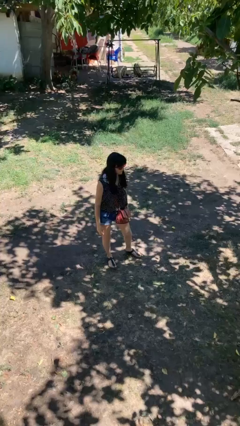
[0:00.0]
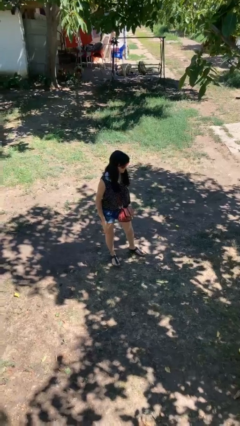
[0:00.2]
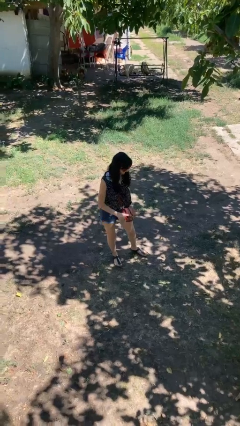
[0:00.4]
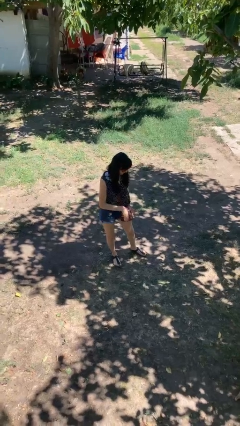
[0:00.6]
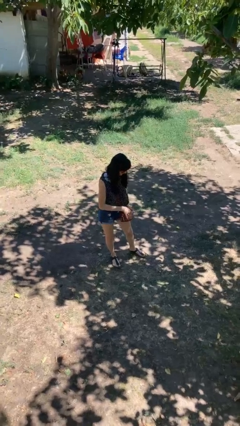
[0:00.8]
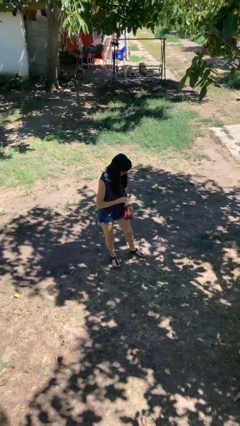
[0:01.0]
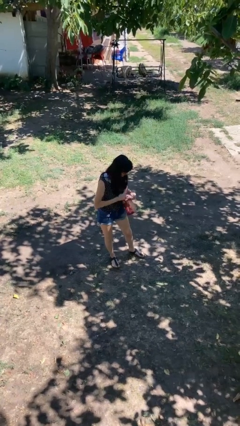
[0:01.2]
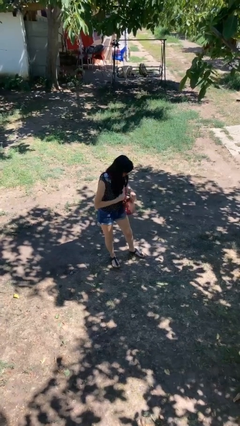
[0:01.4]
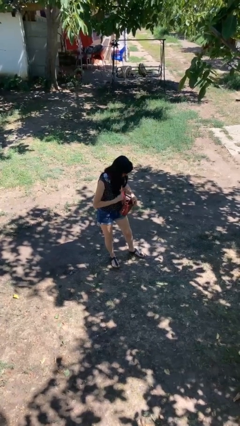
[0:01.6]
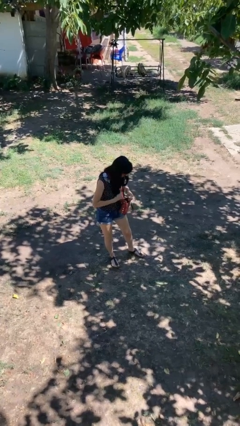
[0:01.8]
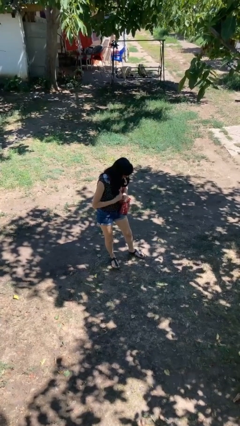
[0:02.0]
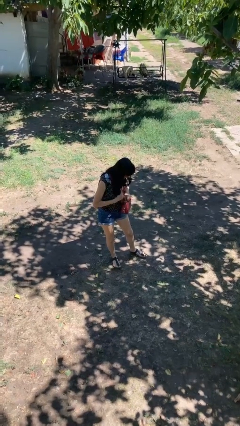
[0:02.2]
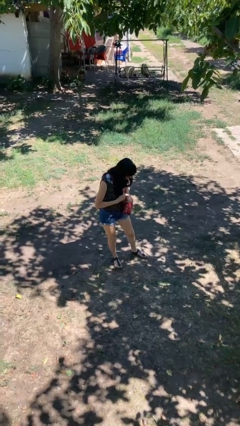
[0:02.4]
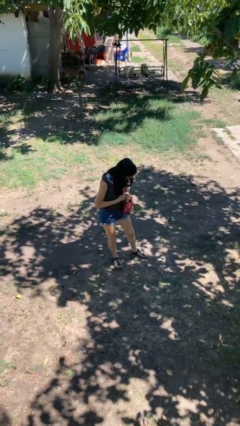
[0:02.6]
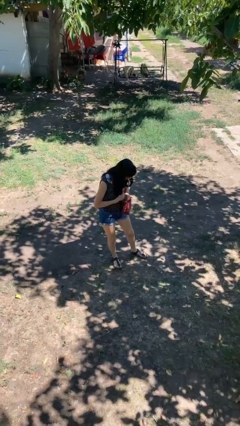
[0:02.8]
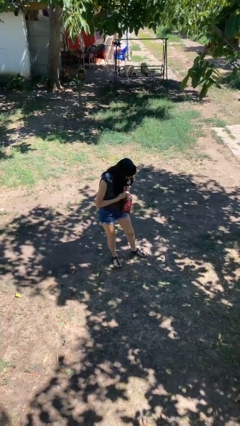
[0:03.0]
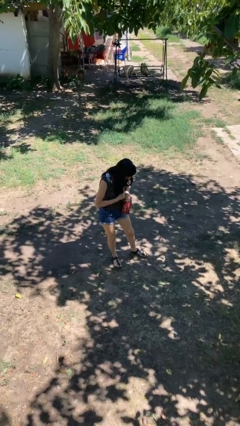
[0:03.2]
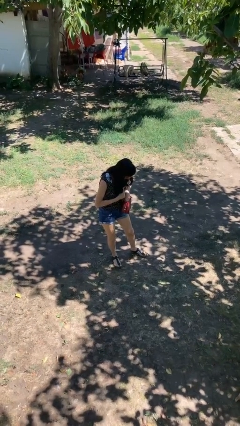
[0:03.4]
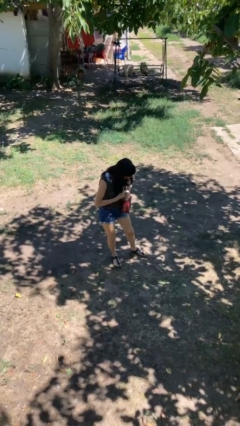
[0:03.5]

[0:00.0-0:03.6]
person searches in purse

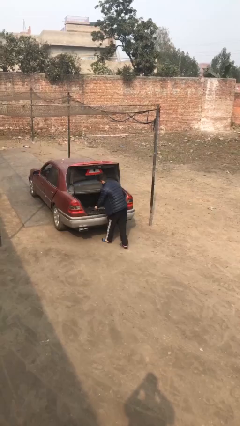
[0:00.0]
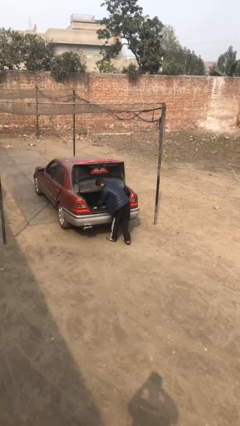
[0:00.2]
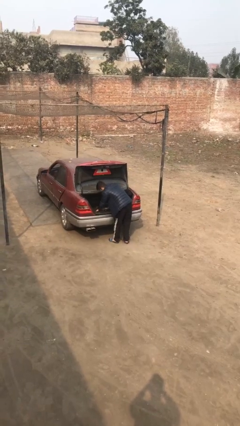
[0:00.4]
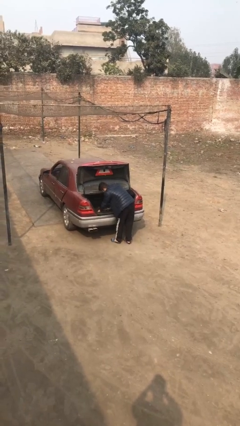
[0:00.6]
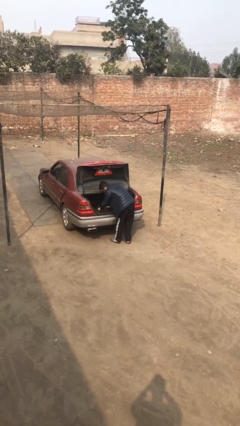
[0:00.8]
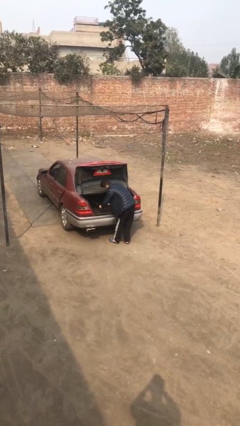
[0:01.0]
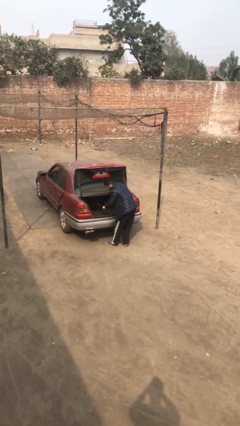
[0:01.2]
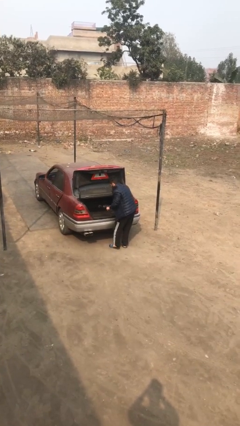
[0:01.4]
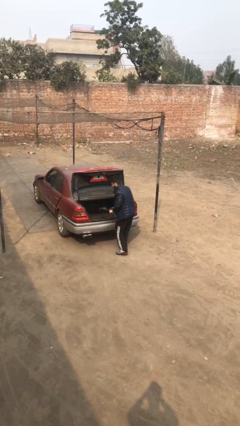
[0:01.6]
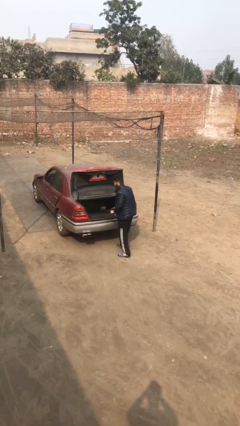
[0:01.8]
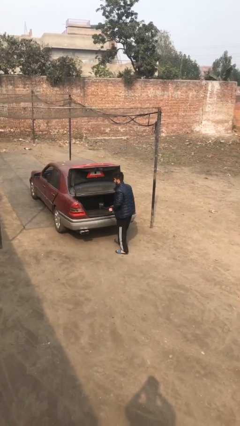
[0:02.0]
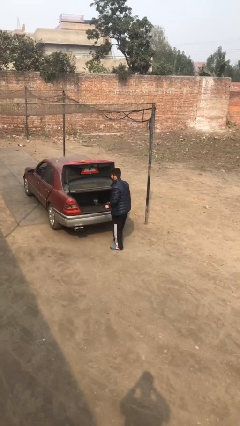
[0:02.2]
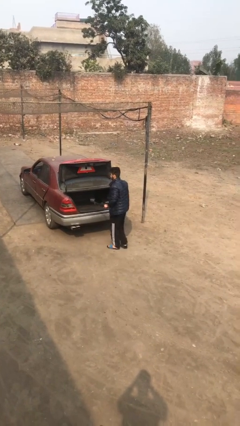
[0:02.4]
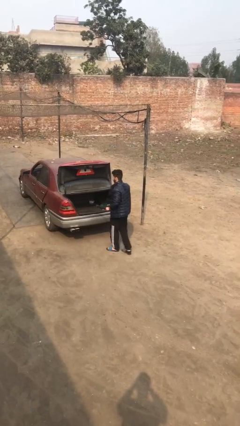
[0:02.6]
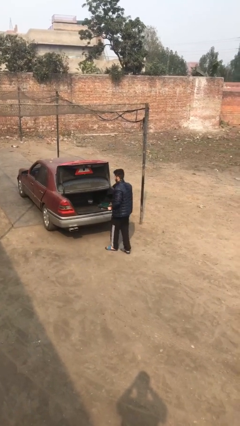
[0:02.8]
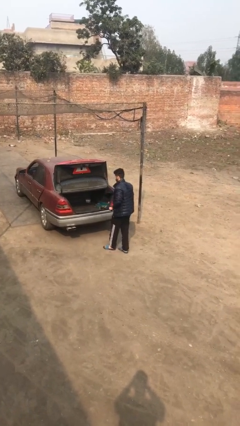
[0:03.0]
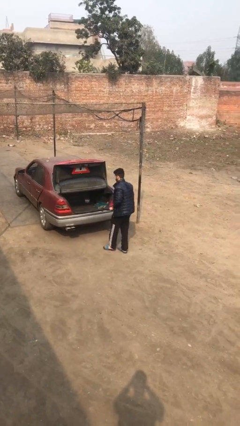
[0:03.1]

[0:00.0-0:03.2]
person unloads car

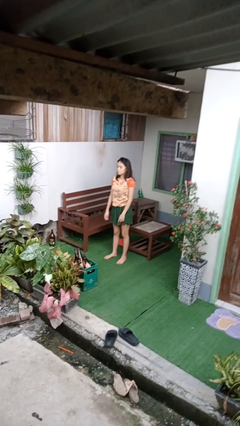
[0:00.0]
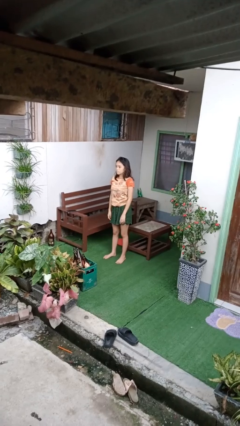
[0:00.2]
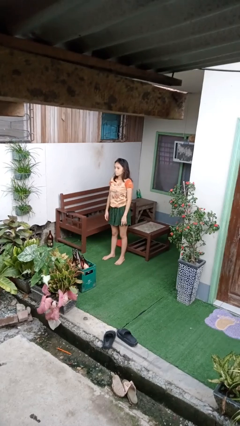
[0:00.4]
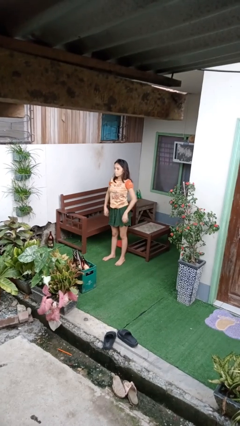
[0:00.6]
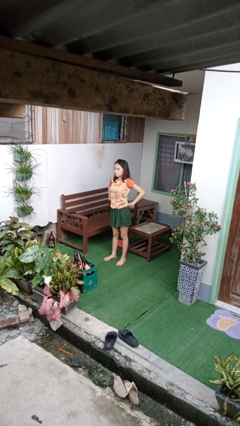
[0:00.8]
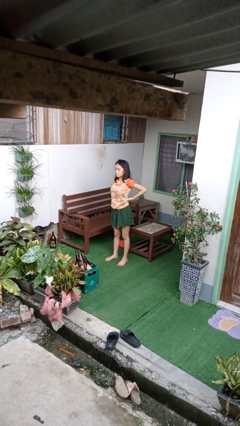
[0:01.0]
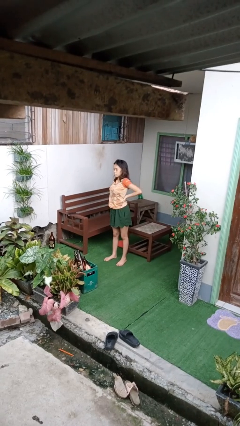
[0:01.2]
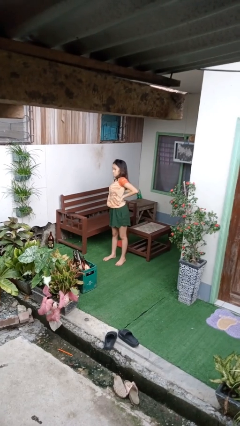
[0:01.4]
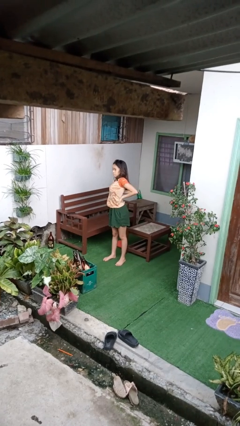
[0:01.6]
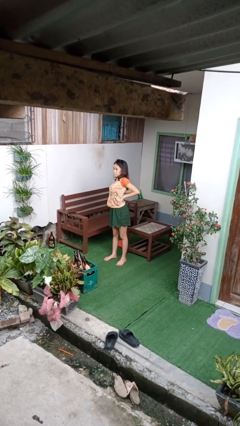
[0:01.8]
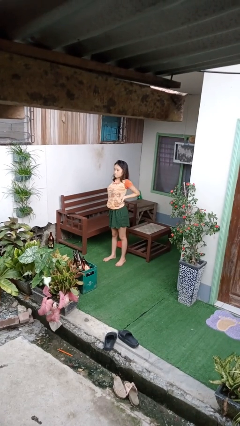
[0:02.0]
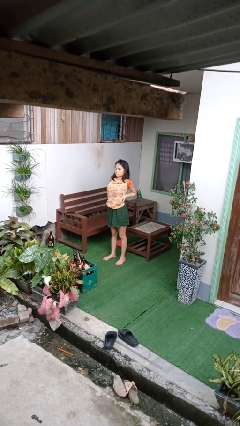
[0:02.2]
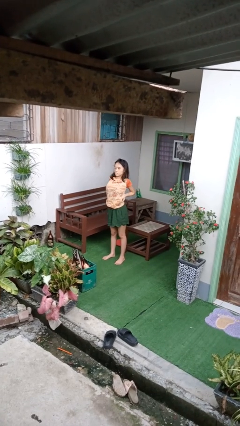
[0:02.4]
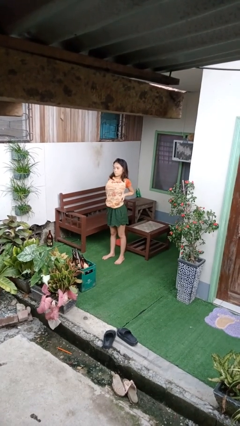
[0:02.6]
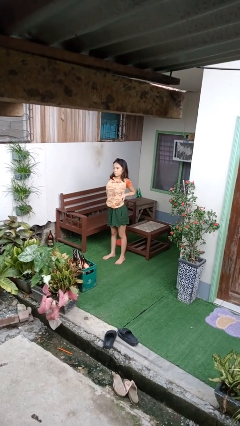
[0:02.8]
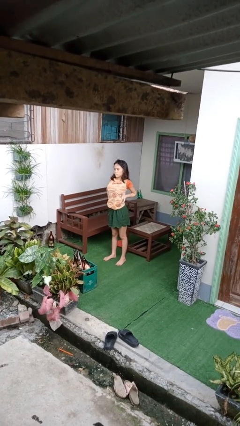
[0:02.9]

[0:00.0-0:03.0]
person stretches back

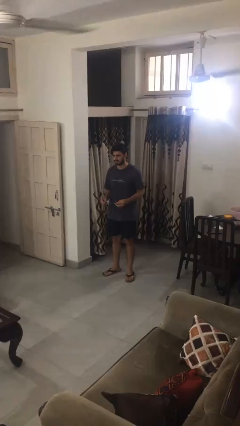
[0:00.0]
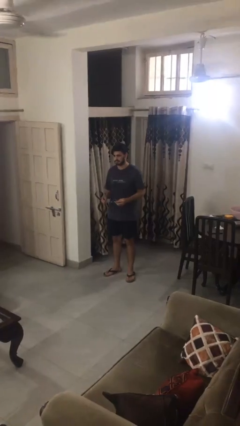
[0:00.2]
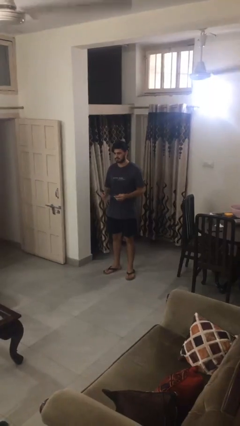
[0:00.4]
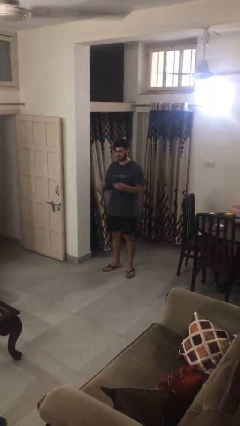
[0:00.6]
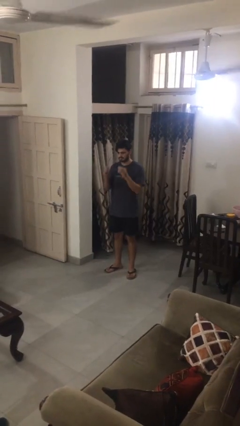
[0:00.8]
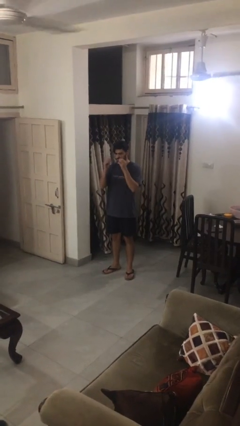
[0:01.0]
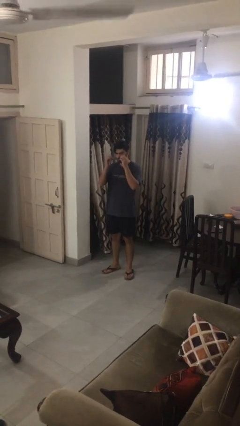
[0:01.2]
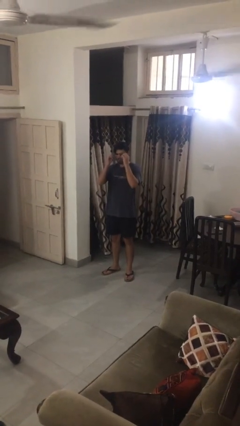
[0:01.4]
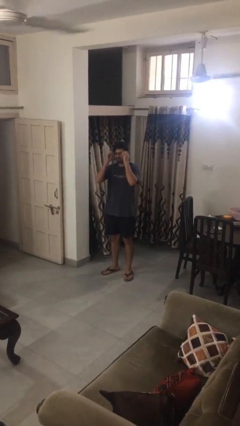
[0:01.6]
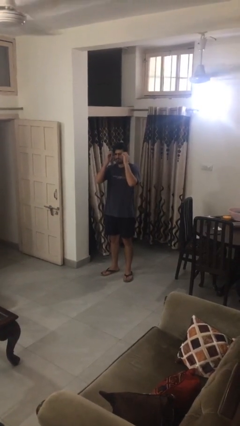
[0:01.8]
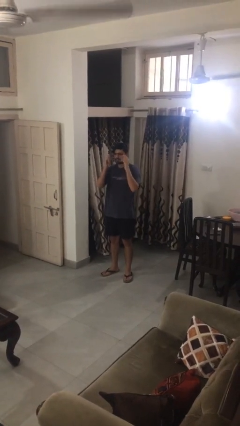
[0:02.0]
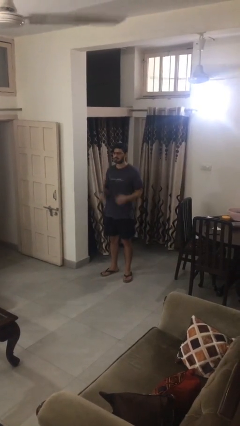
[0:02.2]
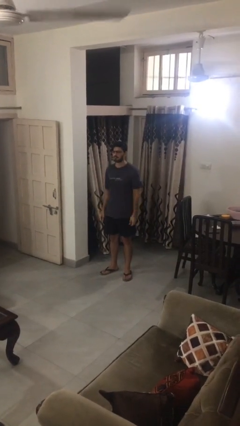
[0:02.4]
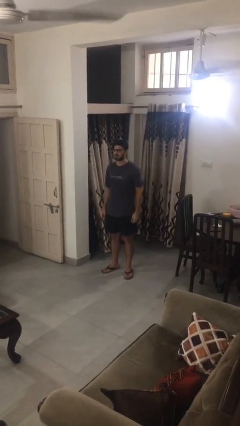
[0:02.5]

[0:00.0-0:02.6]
person puts on glasses

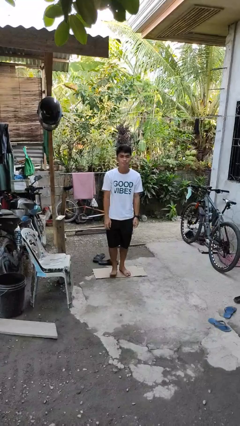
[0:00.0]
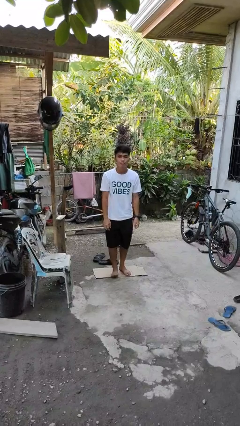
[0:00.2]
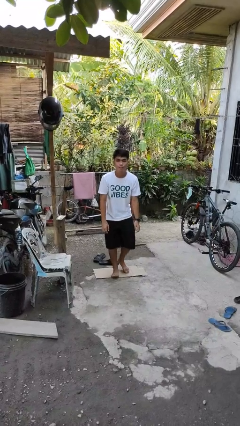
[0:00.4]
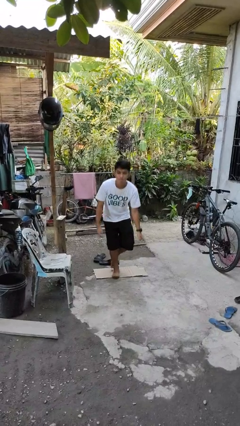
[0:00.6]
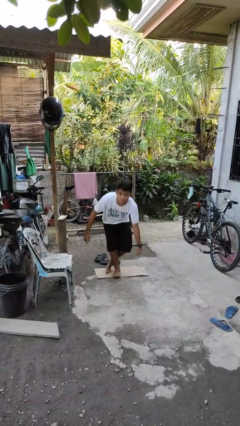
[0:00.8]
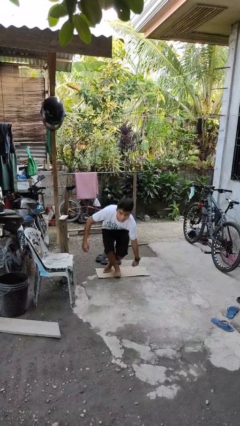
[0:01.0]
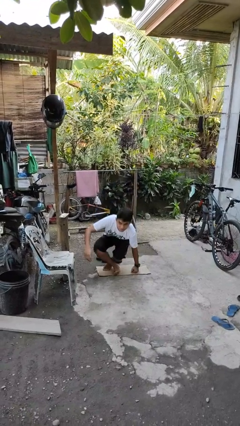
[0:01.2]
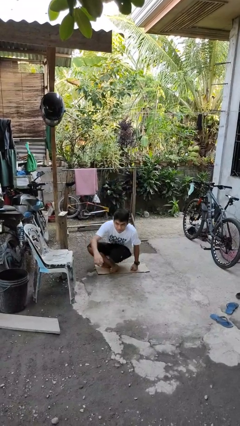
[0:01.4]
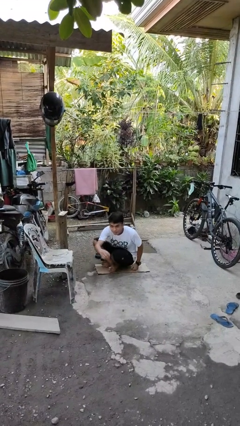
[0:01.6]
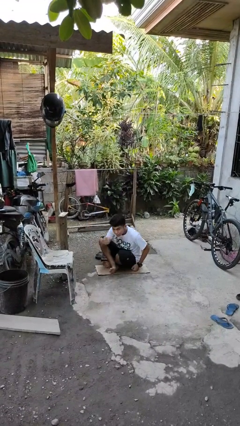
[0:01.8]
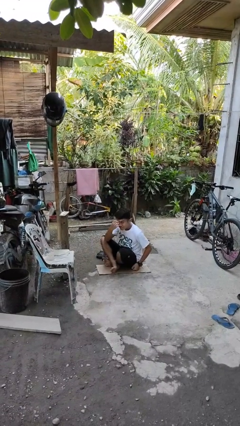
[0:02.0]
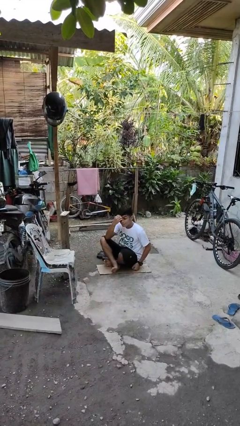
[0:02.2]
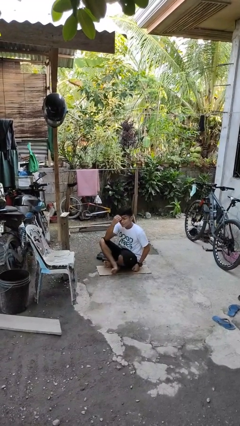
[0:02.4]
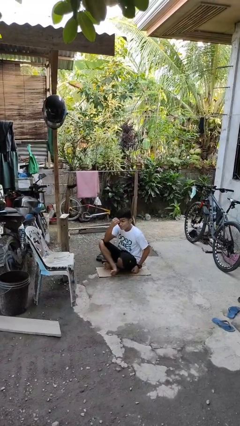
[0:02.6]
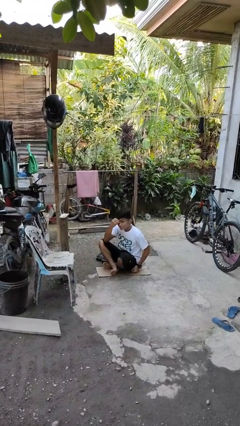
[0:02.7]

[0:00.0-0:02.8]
person sits crisscross

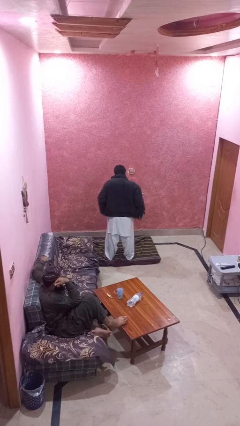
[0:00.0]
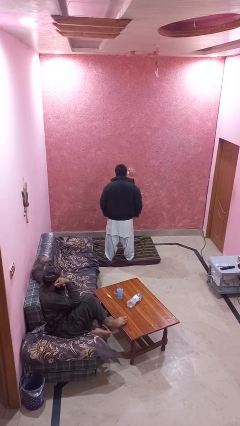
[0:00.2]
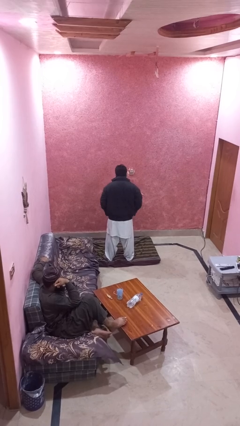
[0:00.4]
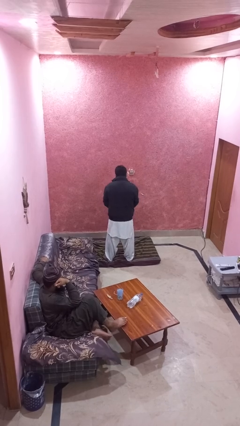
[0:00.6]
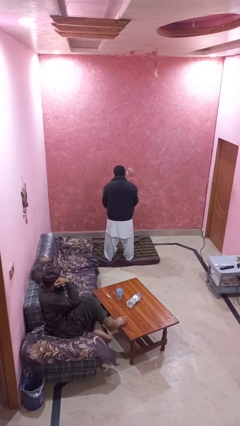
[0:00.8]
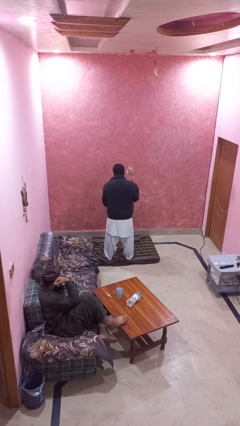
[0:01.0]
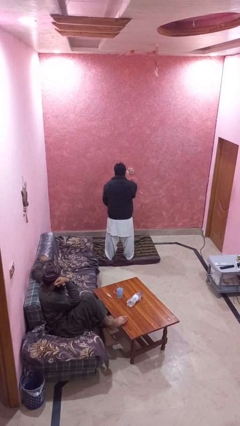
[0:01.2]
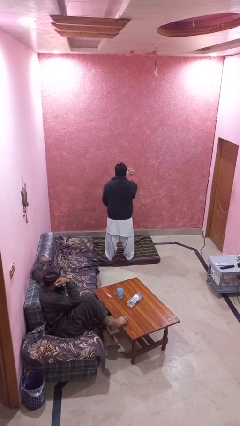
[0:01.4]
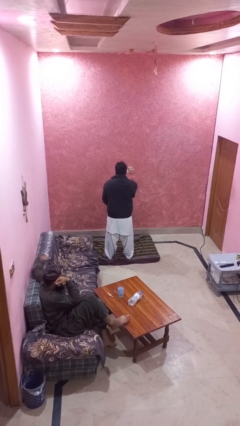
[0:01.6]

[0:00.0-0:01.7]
person zips up jacket

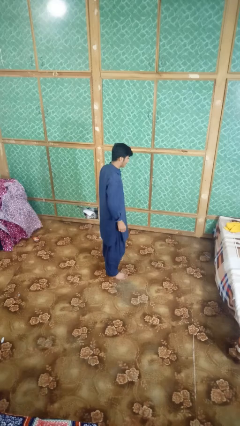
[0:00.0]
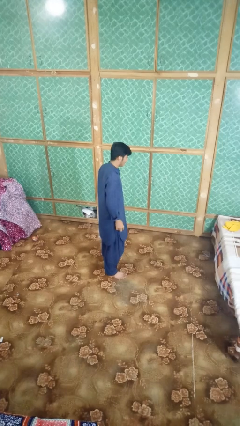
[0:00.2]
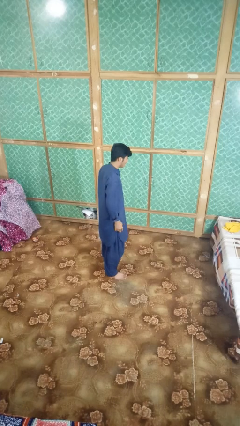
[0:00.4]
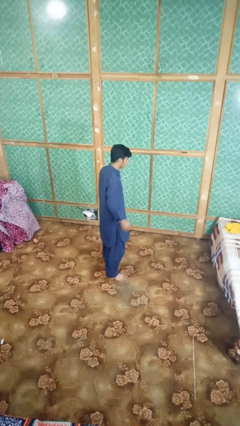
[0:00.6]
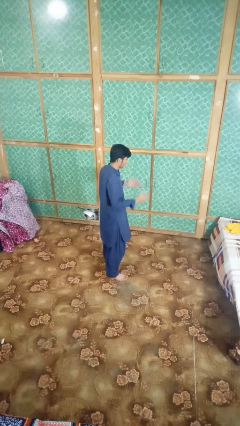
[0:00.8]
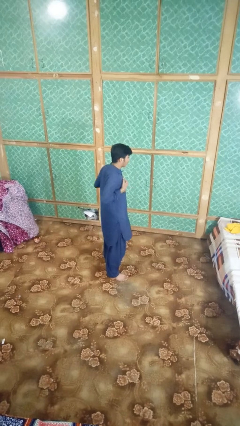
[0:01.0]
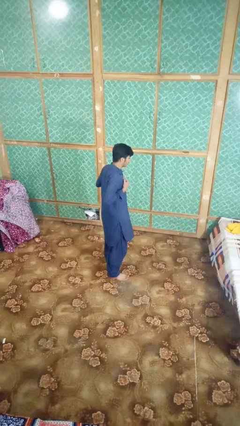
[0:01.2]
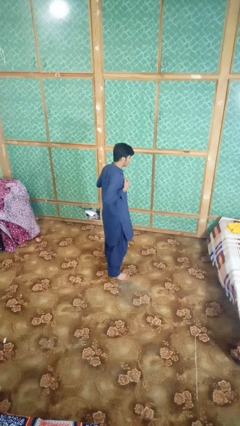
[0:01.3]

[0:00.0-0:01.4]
person drums on chest
